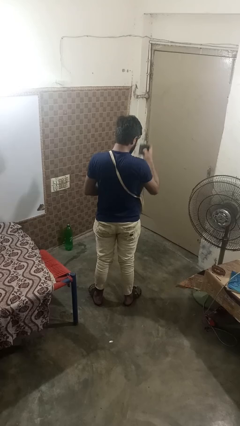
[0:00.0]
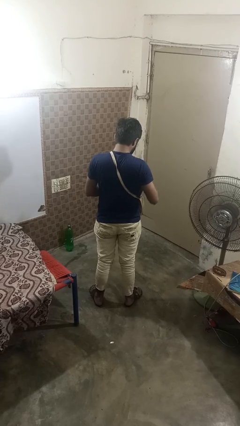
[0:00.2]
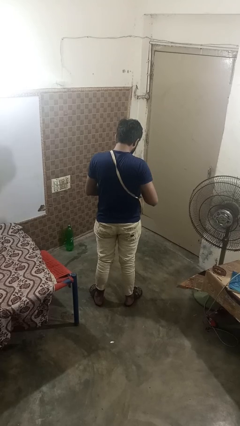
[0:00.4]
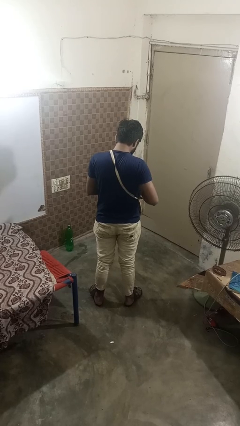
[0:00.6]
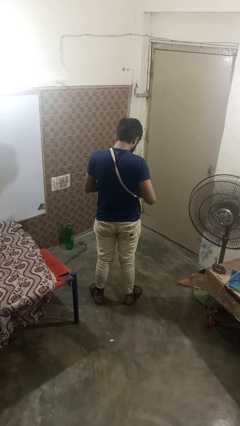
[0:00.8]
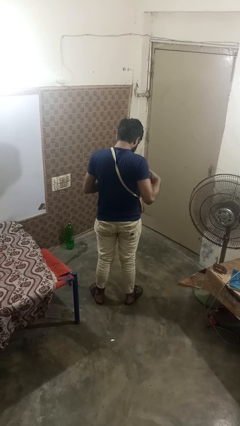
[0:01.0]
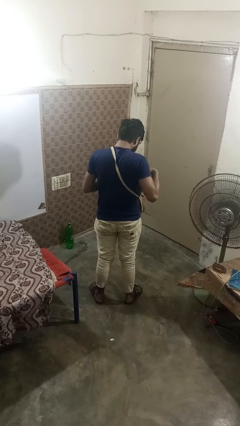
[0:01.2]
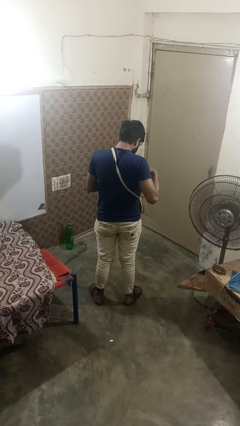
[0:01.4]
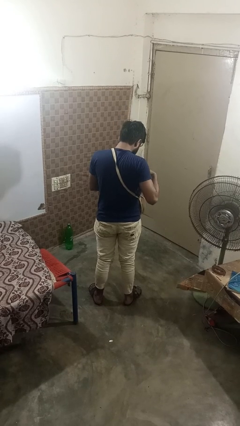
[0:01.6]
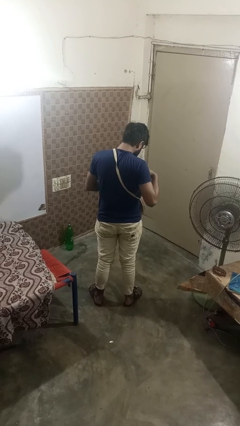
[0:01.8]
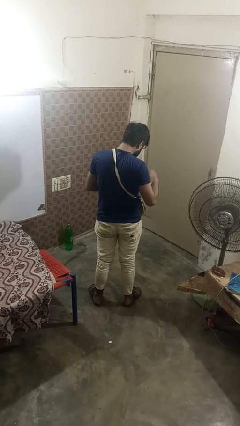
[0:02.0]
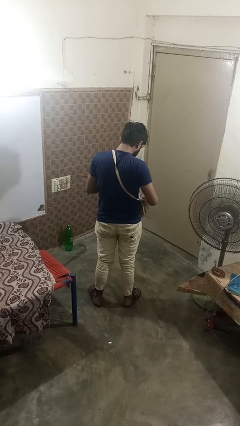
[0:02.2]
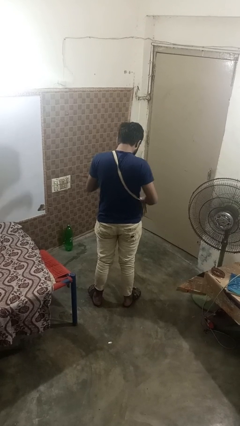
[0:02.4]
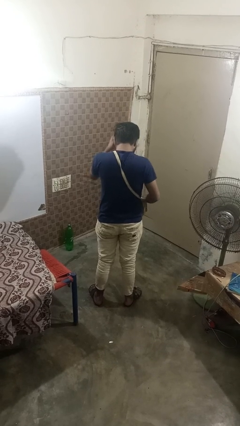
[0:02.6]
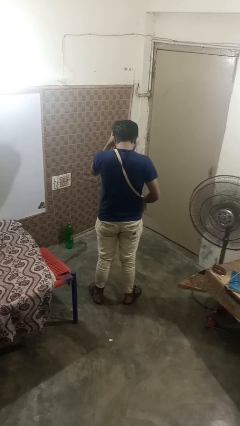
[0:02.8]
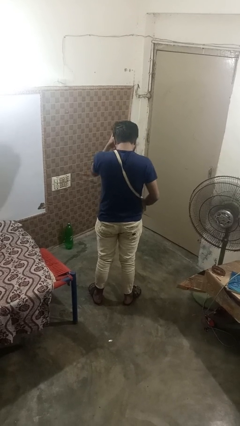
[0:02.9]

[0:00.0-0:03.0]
person puts object into purse

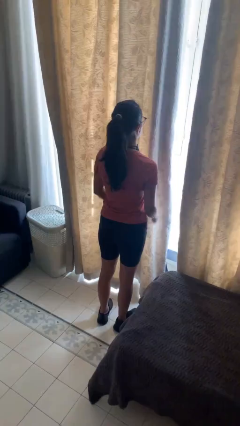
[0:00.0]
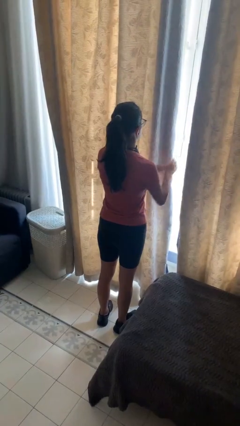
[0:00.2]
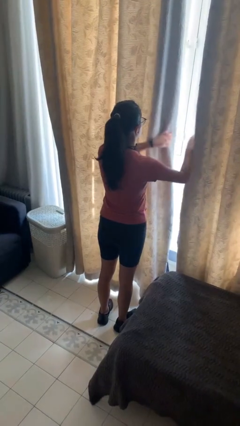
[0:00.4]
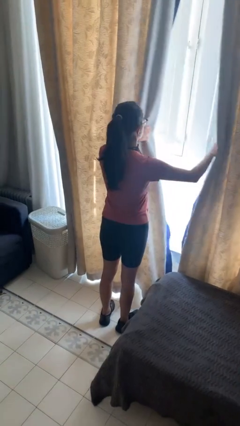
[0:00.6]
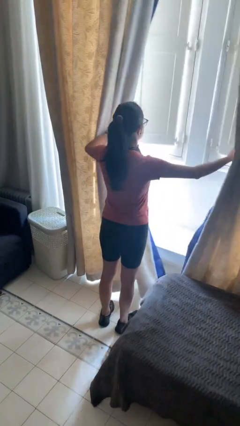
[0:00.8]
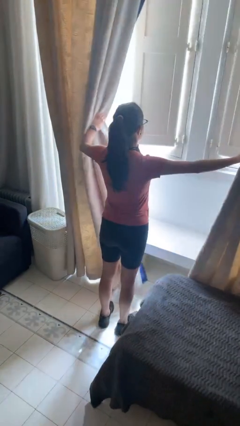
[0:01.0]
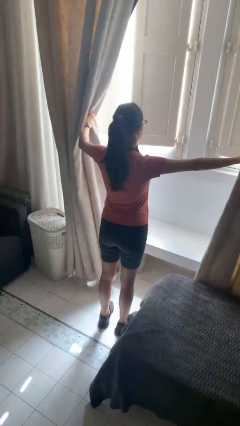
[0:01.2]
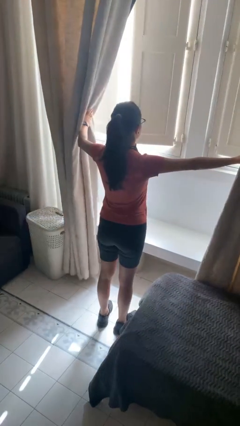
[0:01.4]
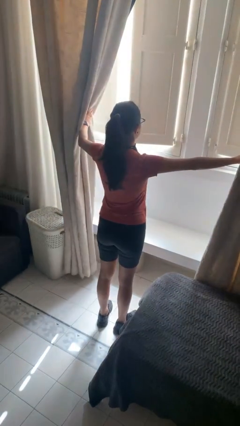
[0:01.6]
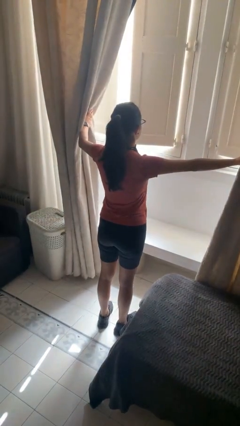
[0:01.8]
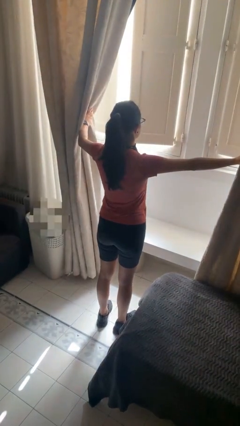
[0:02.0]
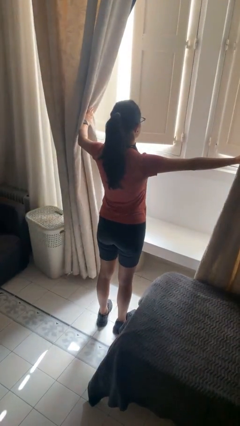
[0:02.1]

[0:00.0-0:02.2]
person opens curtains

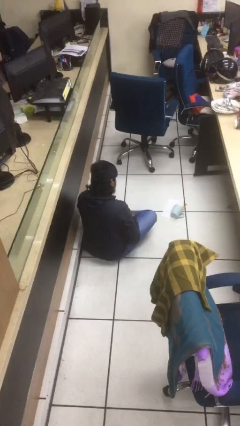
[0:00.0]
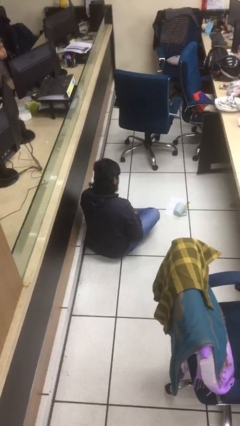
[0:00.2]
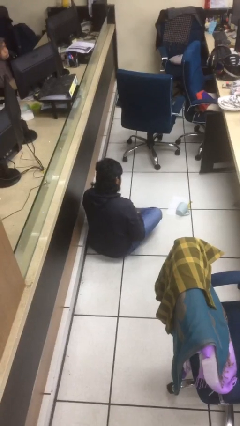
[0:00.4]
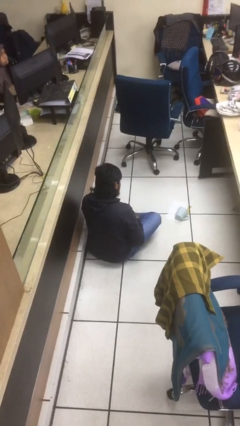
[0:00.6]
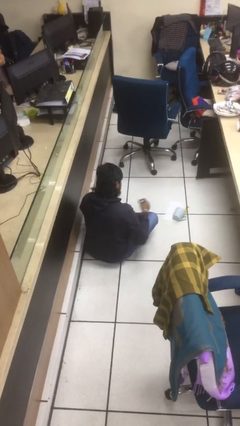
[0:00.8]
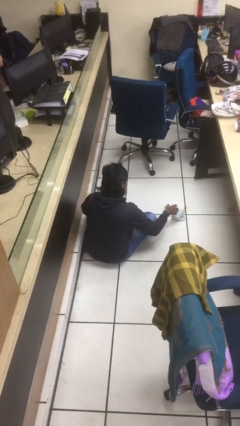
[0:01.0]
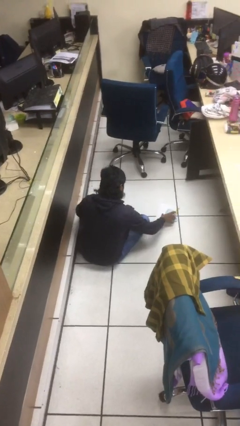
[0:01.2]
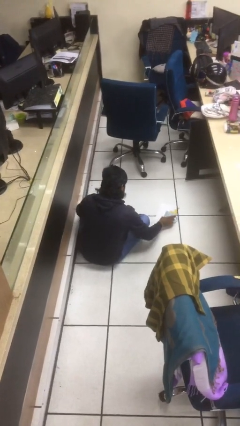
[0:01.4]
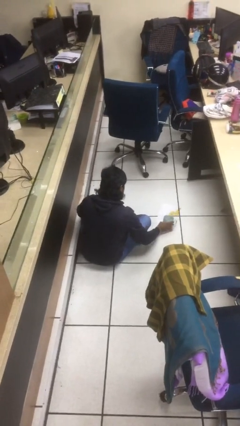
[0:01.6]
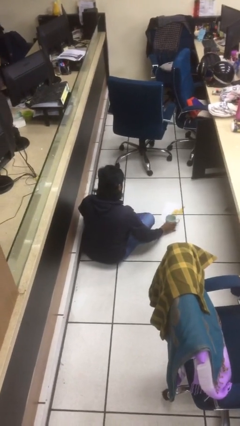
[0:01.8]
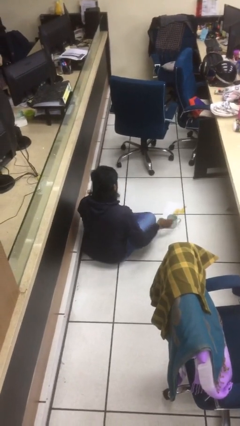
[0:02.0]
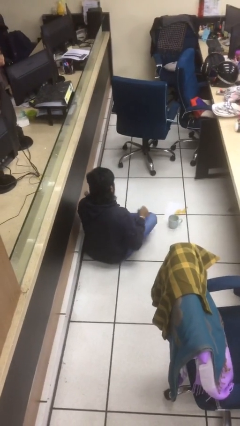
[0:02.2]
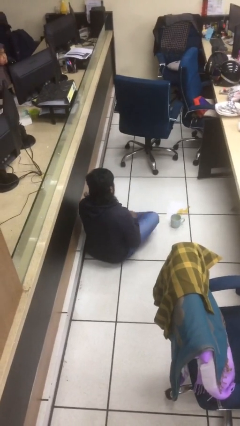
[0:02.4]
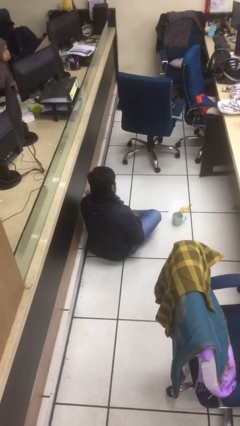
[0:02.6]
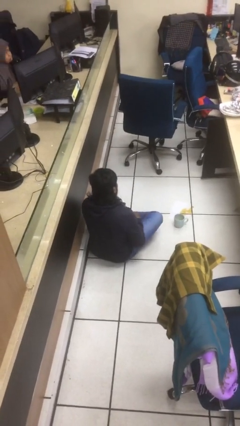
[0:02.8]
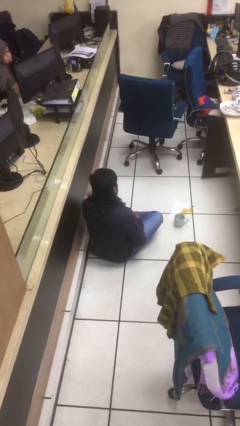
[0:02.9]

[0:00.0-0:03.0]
person sets upright glass

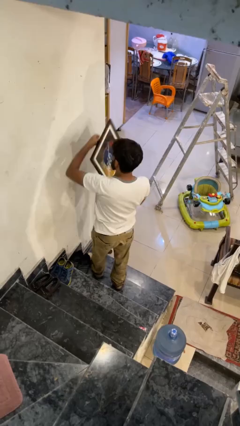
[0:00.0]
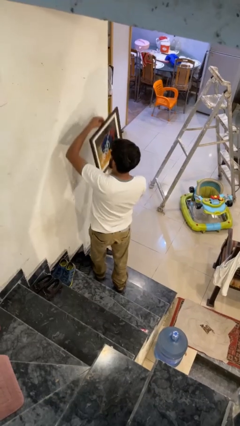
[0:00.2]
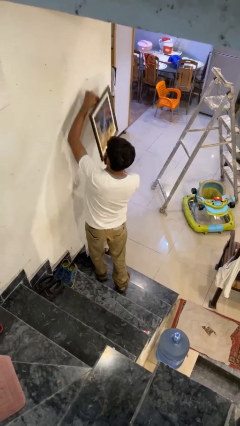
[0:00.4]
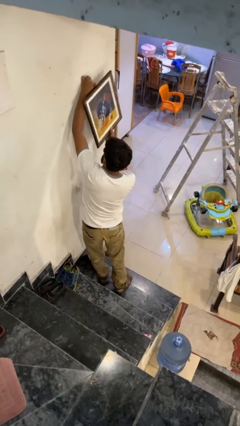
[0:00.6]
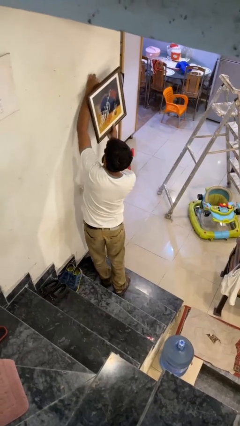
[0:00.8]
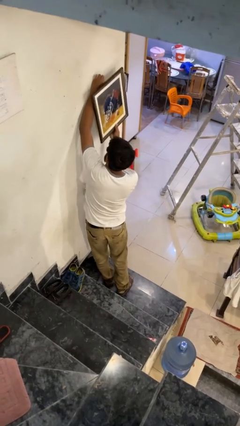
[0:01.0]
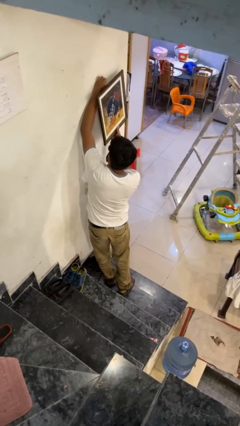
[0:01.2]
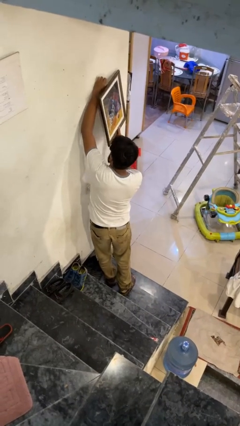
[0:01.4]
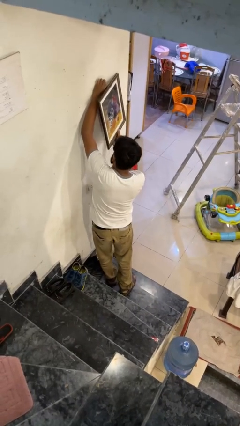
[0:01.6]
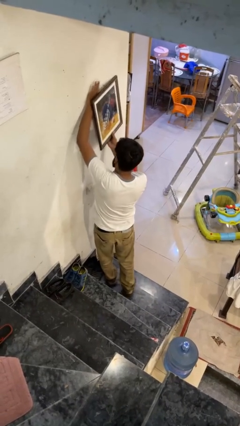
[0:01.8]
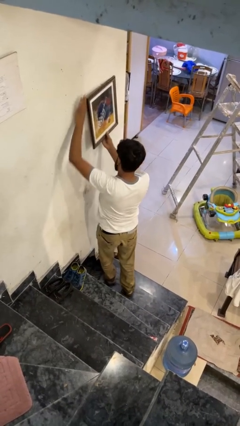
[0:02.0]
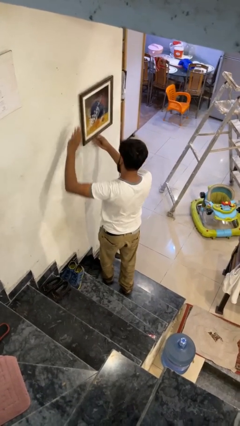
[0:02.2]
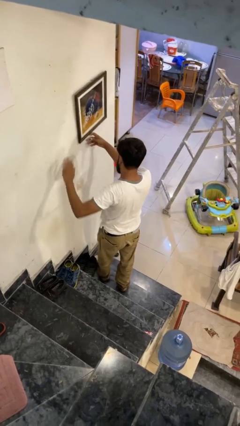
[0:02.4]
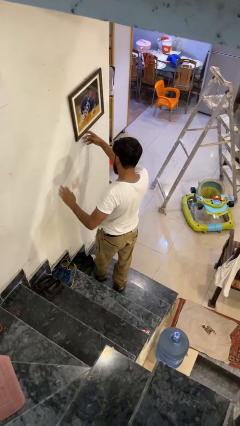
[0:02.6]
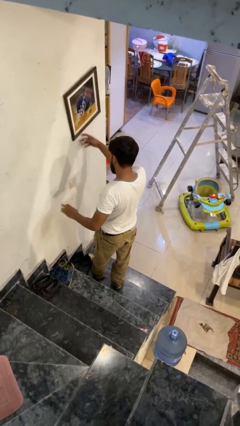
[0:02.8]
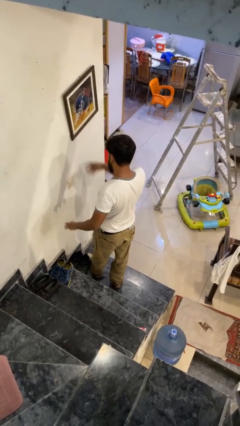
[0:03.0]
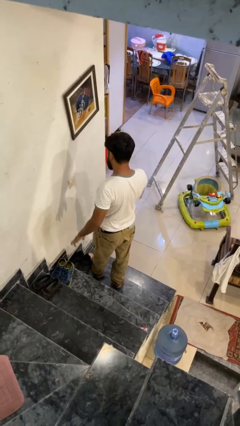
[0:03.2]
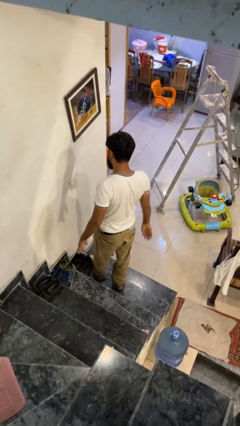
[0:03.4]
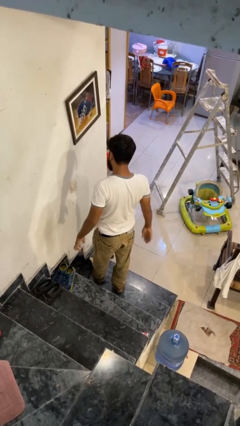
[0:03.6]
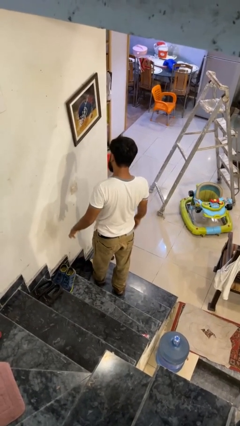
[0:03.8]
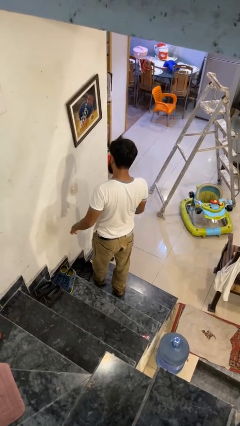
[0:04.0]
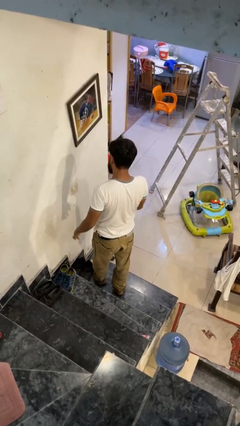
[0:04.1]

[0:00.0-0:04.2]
person puts up picture frame

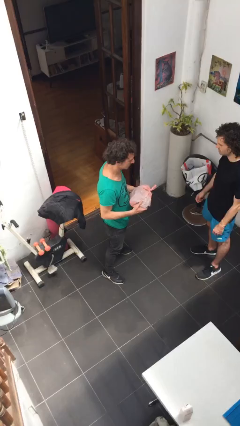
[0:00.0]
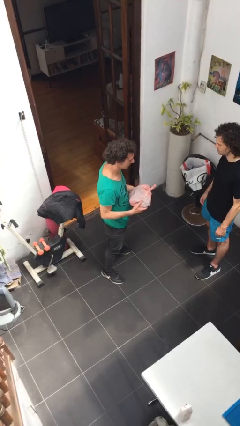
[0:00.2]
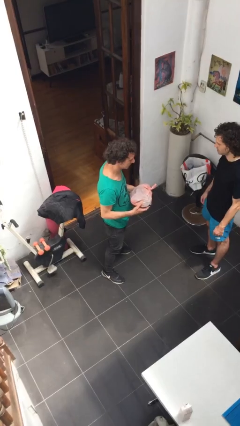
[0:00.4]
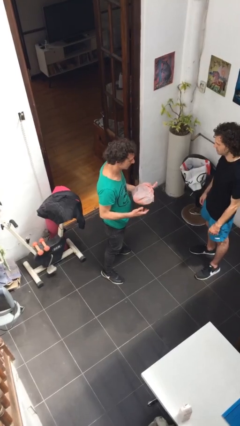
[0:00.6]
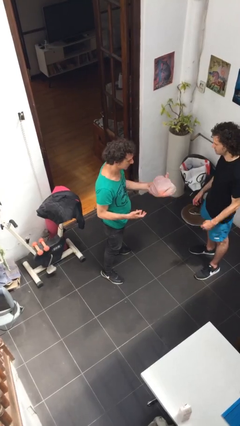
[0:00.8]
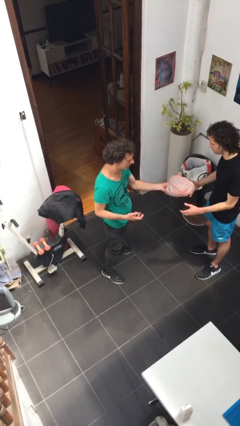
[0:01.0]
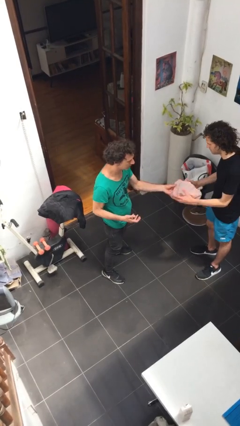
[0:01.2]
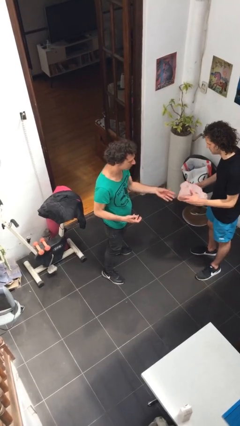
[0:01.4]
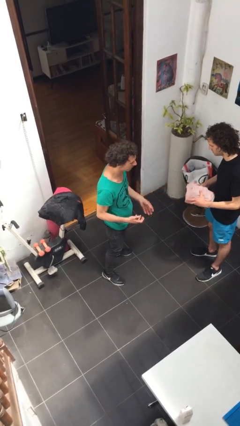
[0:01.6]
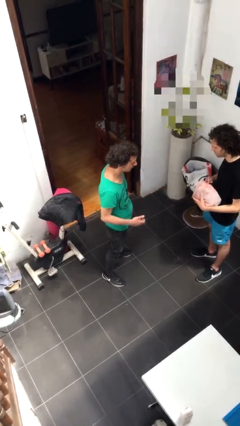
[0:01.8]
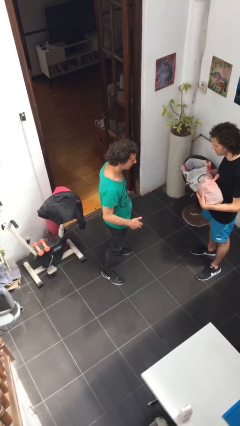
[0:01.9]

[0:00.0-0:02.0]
person transfers object to person

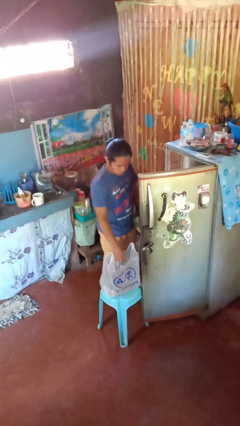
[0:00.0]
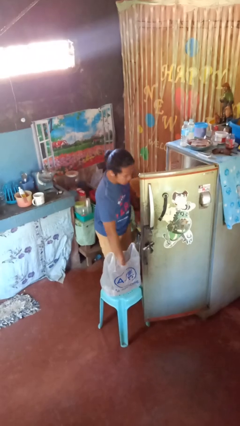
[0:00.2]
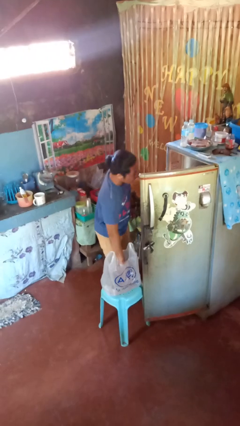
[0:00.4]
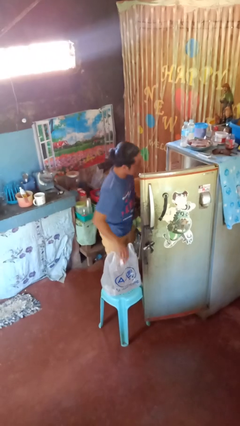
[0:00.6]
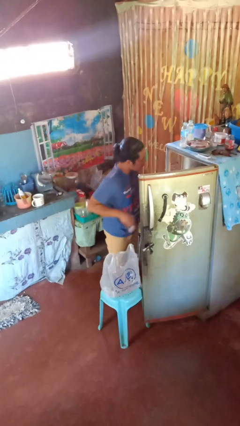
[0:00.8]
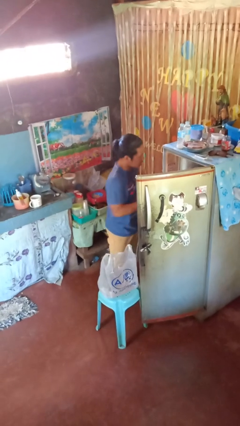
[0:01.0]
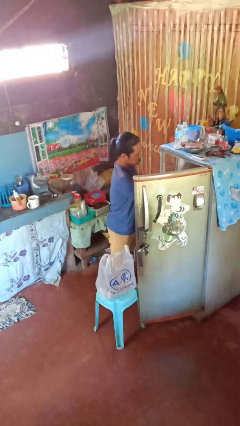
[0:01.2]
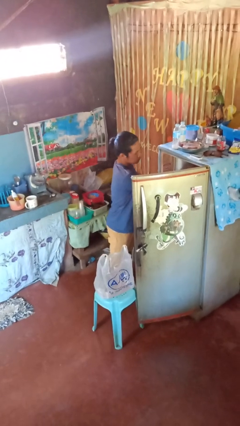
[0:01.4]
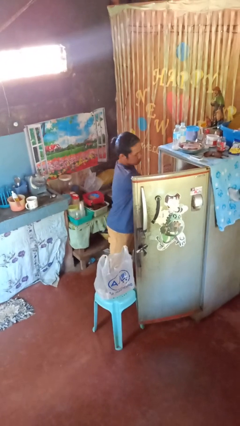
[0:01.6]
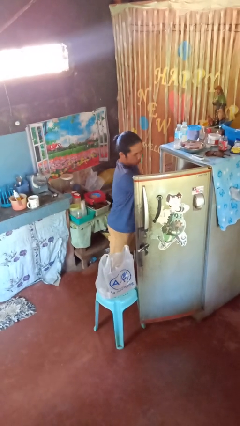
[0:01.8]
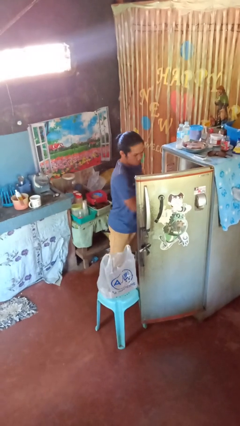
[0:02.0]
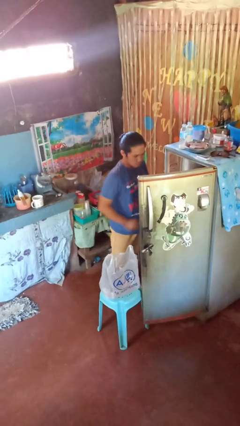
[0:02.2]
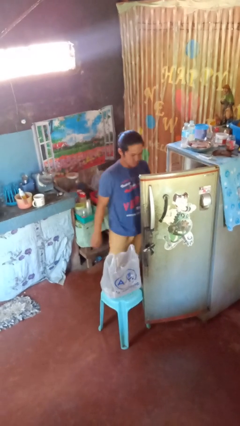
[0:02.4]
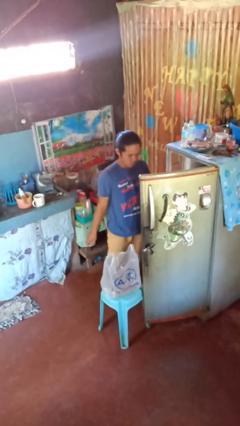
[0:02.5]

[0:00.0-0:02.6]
person loads groceries into refrigerator

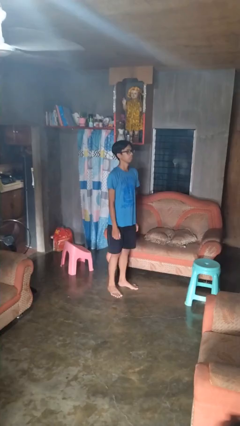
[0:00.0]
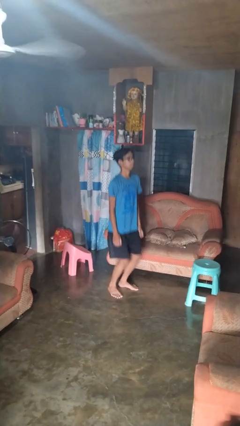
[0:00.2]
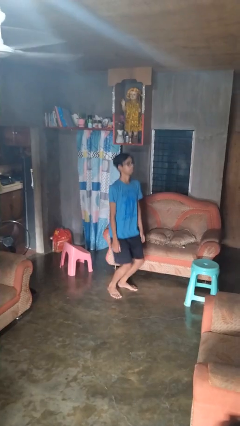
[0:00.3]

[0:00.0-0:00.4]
person jumps
